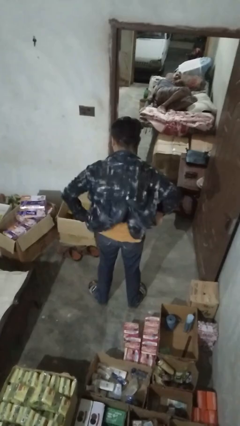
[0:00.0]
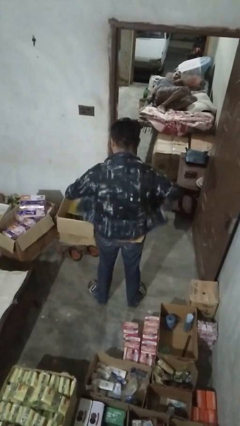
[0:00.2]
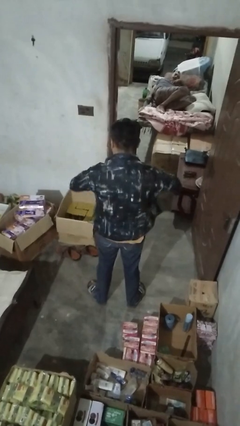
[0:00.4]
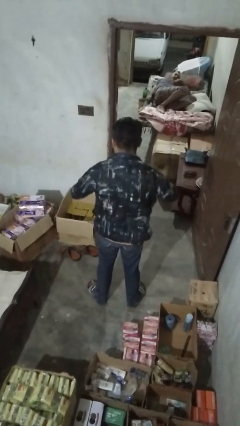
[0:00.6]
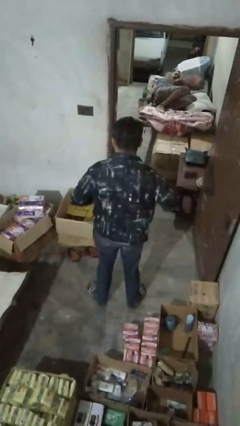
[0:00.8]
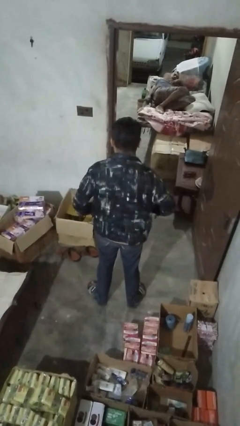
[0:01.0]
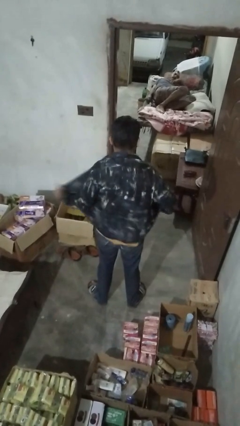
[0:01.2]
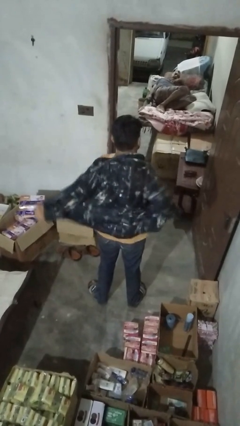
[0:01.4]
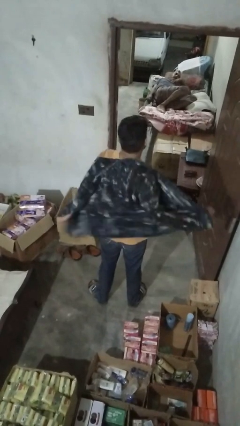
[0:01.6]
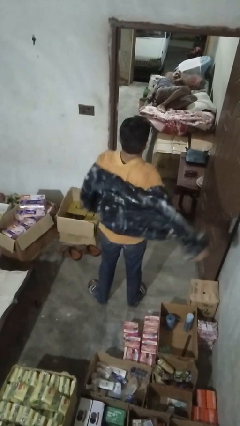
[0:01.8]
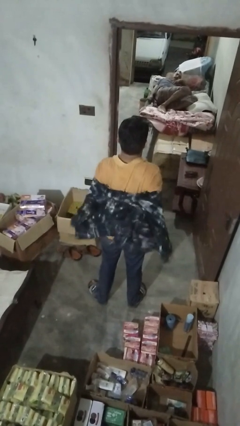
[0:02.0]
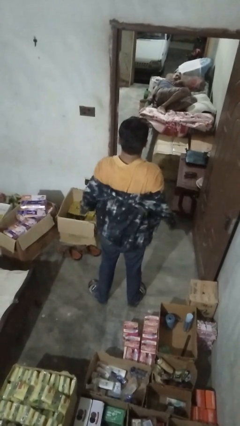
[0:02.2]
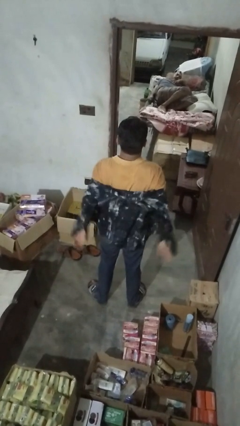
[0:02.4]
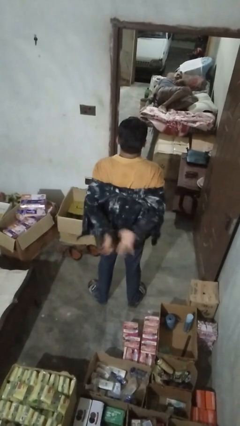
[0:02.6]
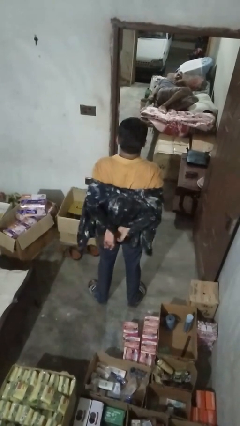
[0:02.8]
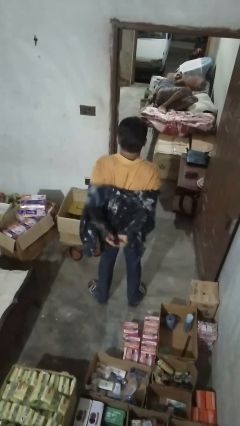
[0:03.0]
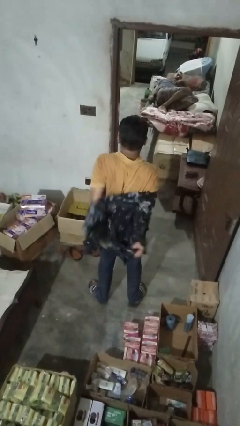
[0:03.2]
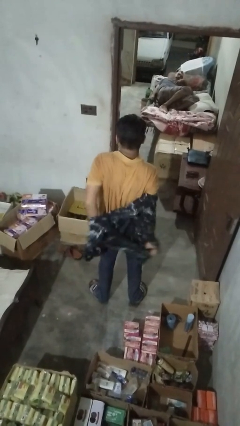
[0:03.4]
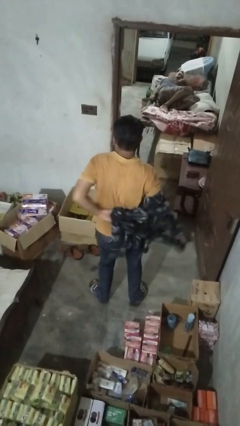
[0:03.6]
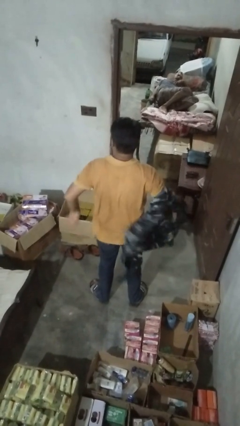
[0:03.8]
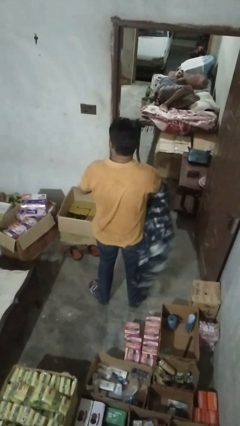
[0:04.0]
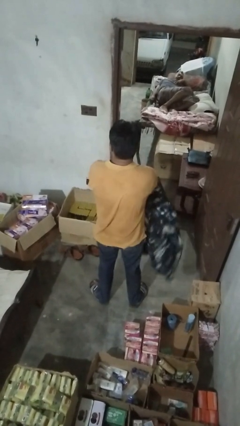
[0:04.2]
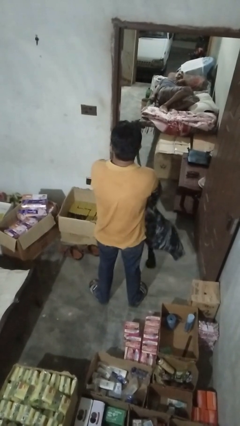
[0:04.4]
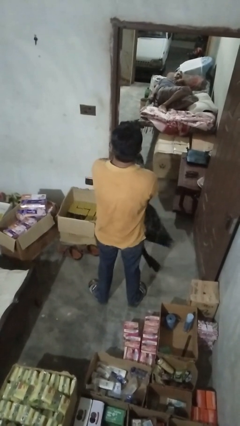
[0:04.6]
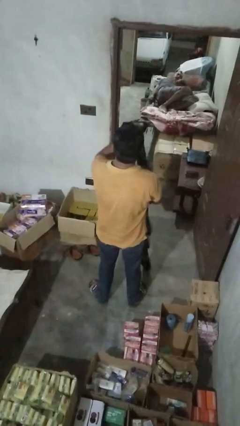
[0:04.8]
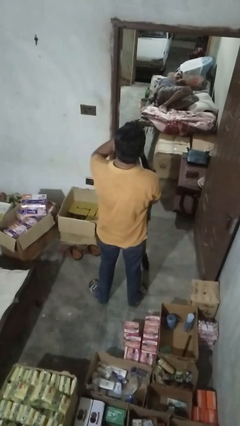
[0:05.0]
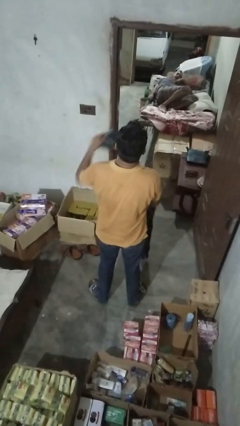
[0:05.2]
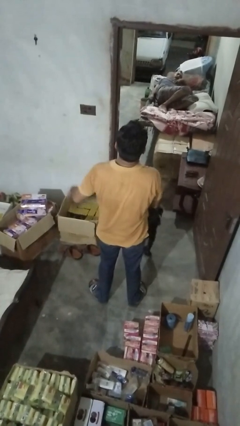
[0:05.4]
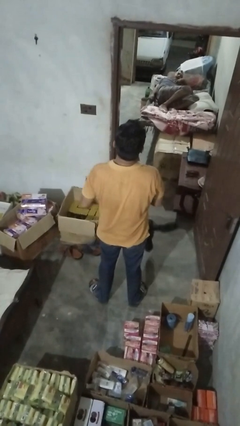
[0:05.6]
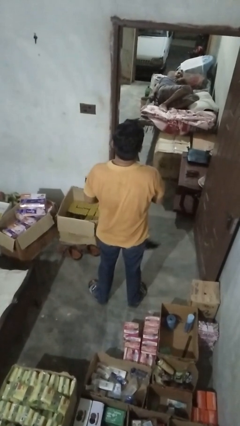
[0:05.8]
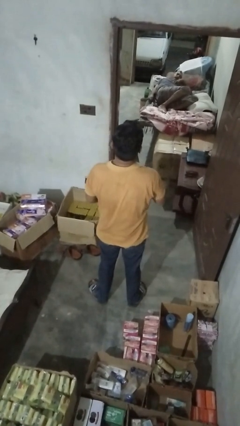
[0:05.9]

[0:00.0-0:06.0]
person takes off shirt

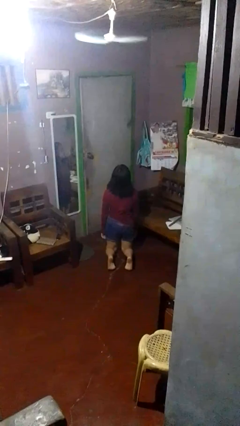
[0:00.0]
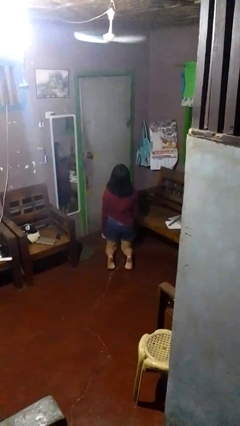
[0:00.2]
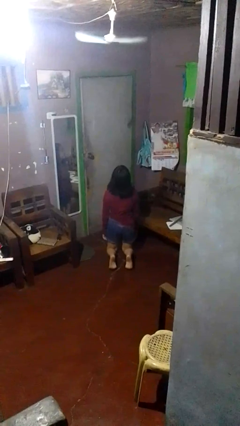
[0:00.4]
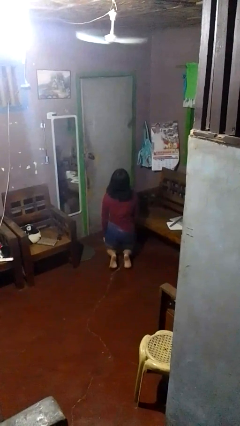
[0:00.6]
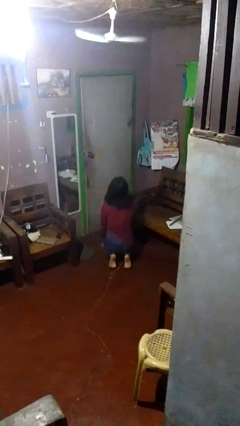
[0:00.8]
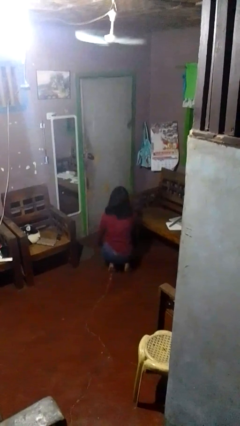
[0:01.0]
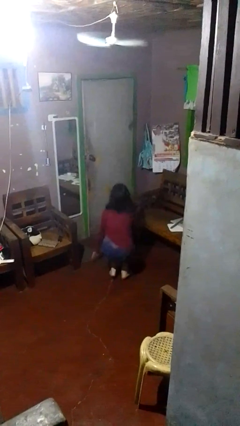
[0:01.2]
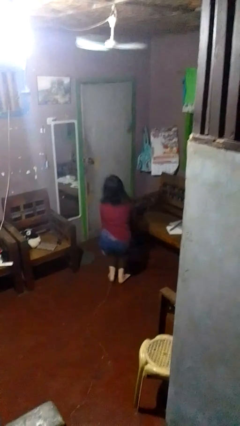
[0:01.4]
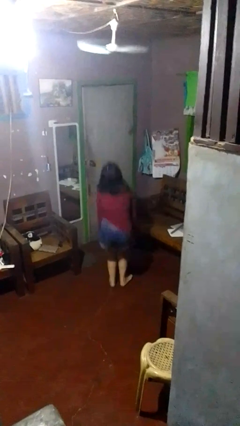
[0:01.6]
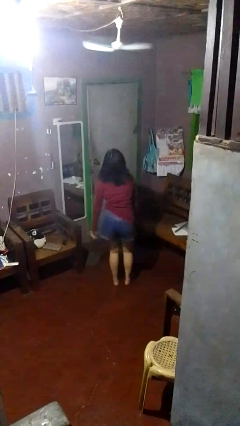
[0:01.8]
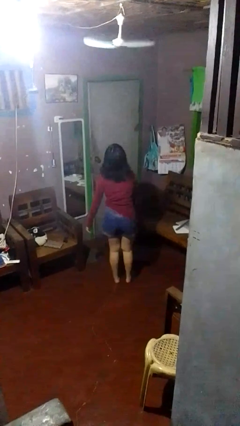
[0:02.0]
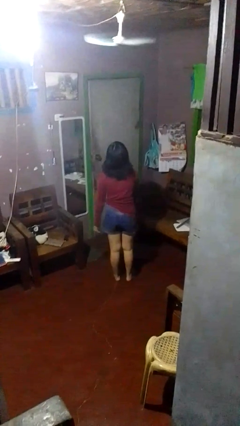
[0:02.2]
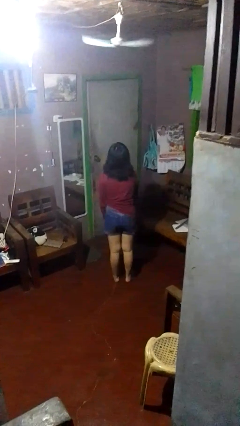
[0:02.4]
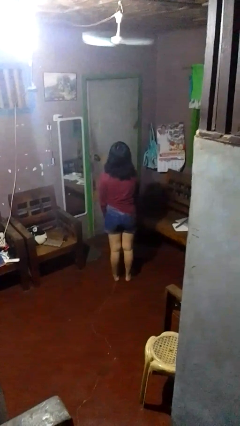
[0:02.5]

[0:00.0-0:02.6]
person stands up from floor

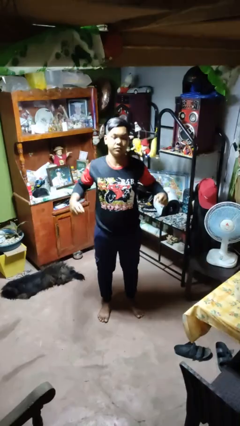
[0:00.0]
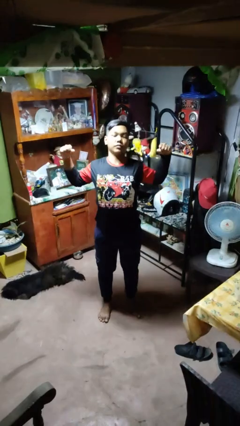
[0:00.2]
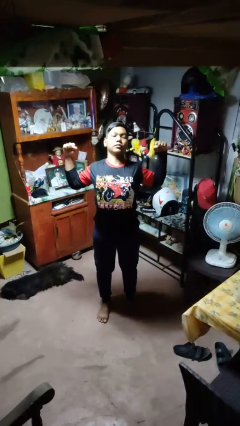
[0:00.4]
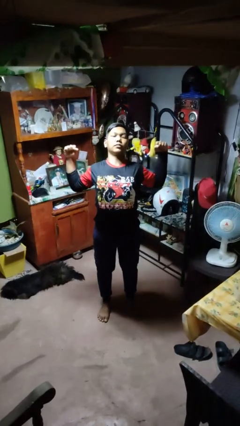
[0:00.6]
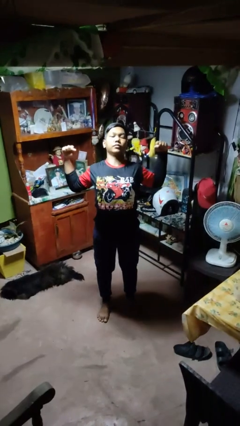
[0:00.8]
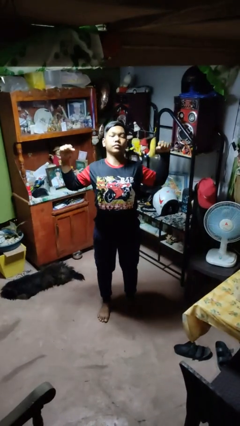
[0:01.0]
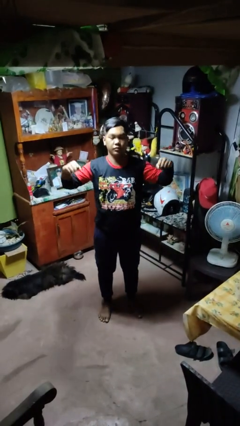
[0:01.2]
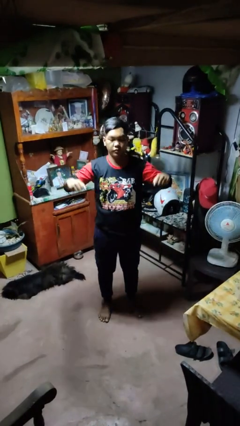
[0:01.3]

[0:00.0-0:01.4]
person stretches arms to side

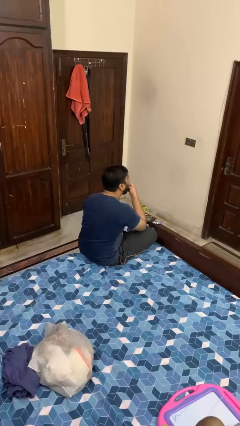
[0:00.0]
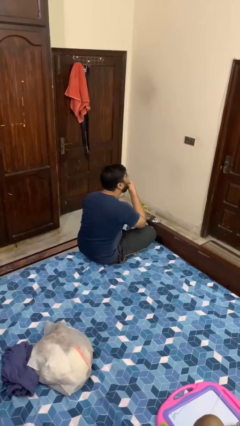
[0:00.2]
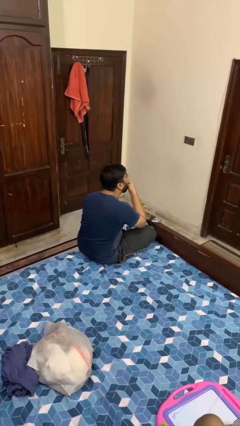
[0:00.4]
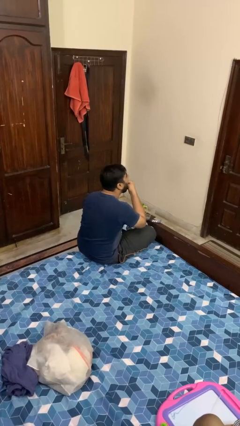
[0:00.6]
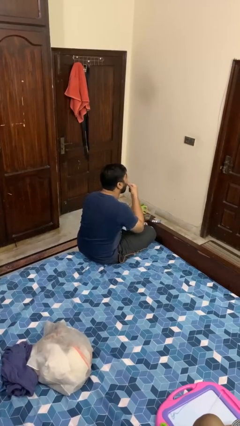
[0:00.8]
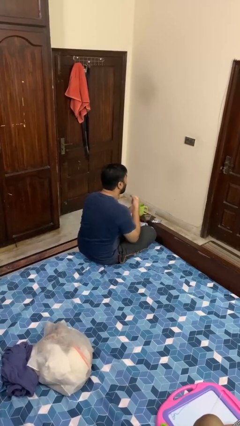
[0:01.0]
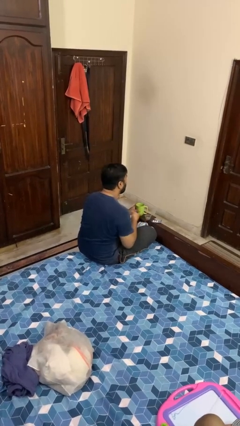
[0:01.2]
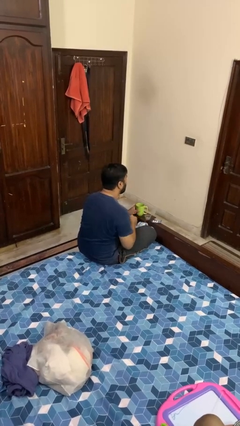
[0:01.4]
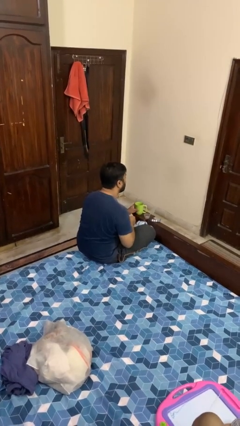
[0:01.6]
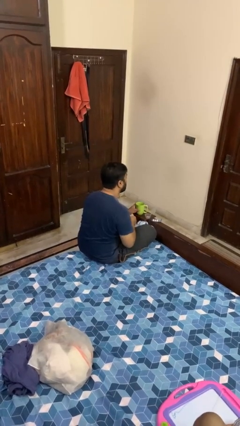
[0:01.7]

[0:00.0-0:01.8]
person takes medicine pills

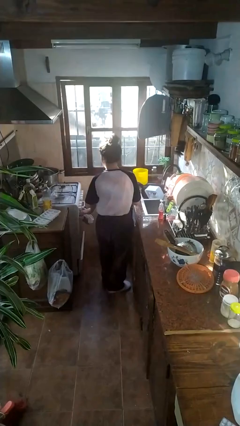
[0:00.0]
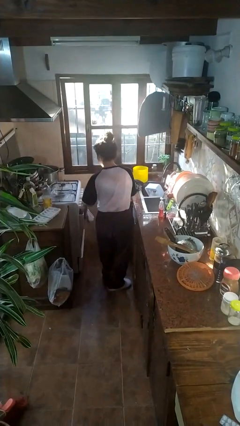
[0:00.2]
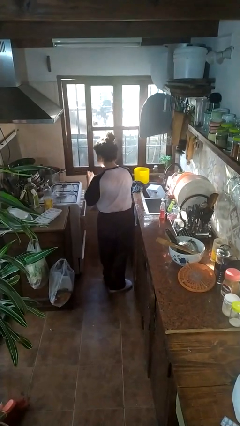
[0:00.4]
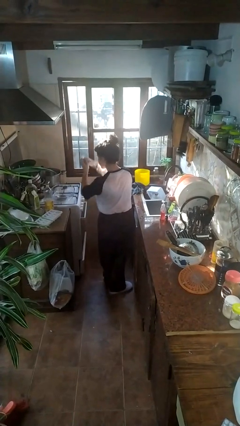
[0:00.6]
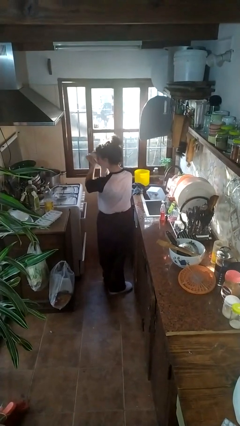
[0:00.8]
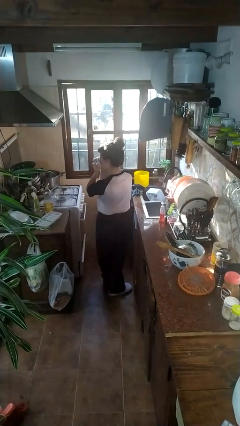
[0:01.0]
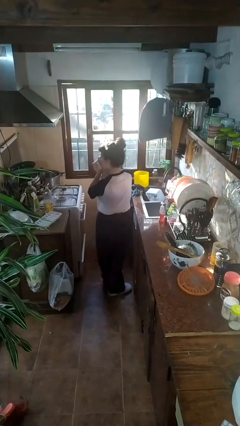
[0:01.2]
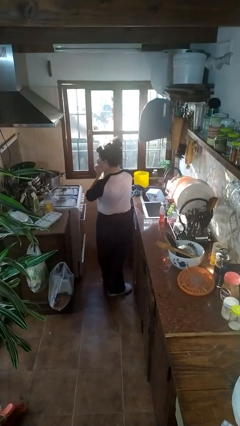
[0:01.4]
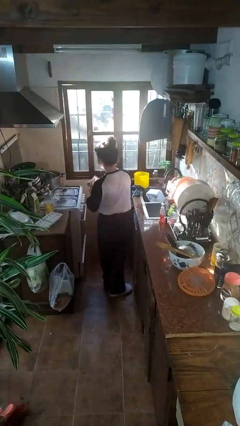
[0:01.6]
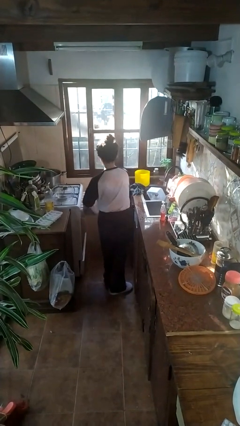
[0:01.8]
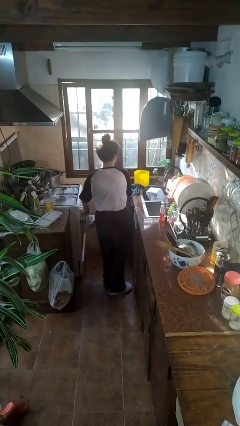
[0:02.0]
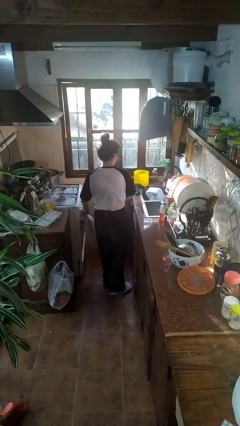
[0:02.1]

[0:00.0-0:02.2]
person dries face with towel

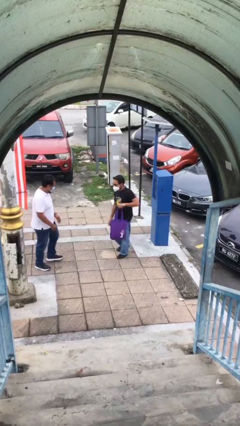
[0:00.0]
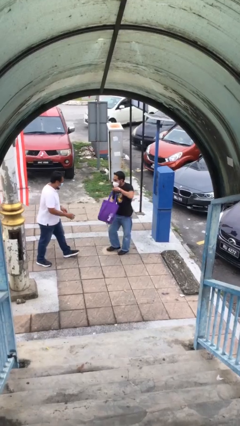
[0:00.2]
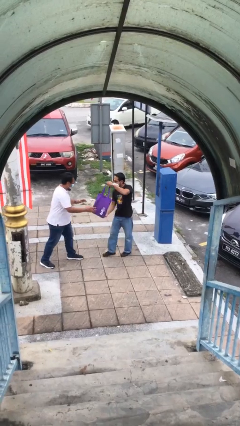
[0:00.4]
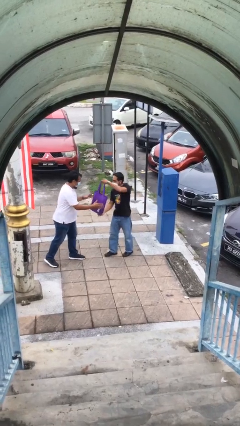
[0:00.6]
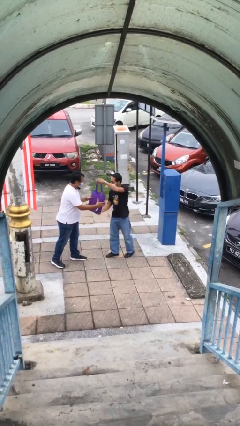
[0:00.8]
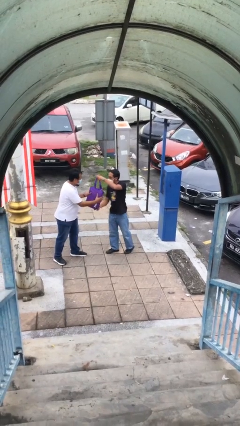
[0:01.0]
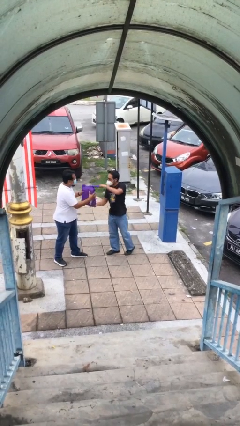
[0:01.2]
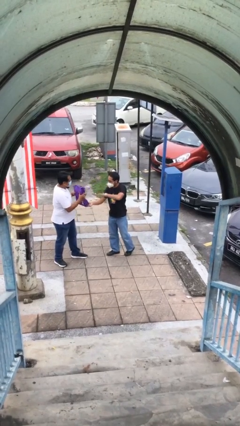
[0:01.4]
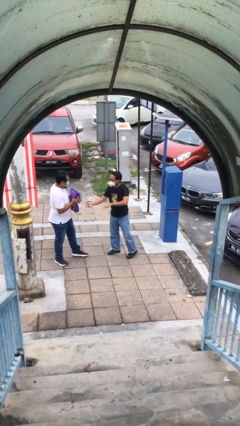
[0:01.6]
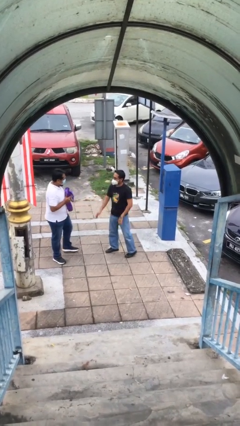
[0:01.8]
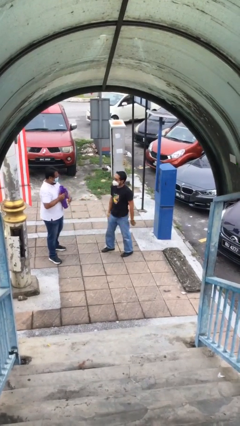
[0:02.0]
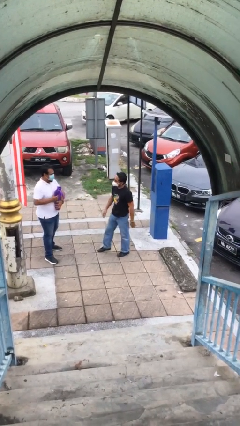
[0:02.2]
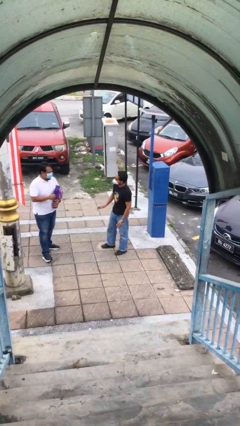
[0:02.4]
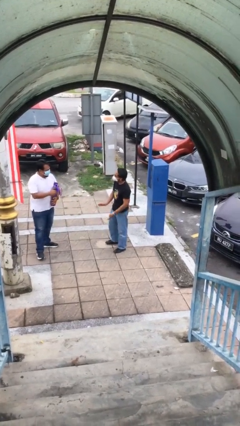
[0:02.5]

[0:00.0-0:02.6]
person transfers object to person

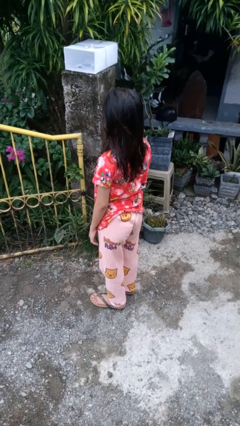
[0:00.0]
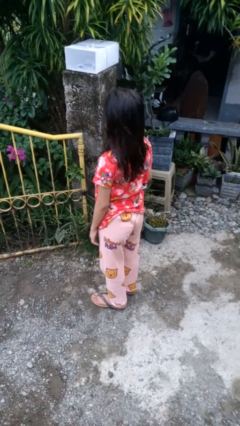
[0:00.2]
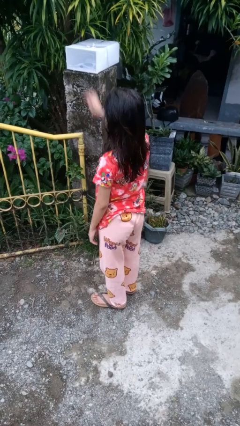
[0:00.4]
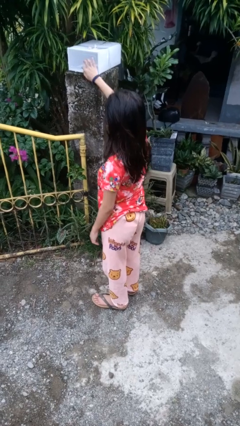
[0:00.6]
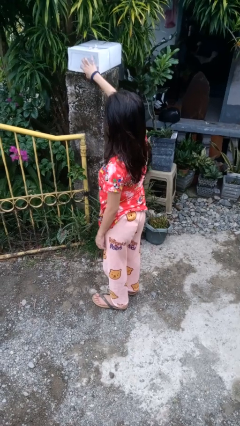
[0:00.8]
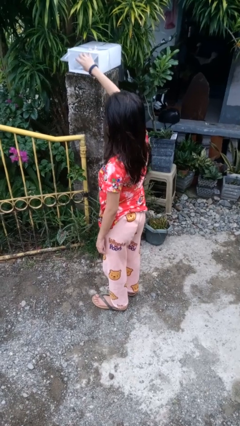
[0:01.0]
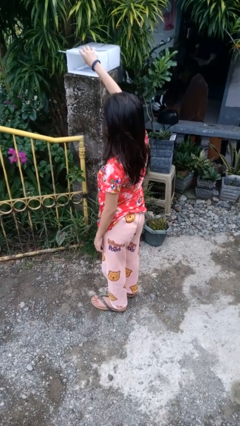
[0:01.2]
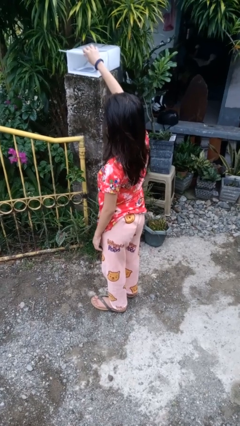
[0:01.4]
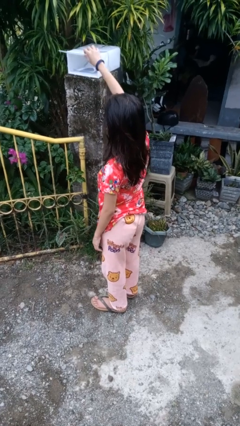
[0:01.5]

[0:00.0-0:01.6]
person opens mailbox
